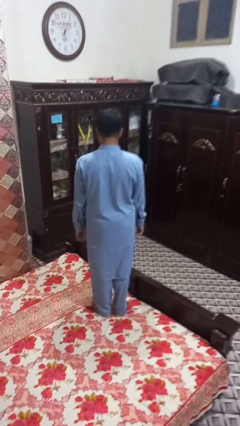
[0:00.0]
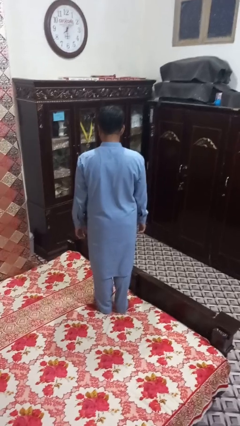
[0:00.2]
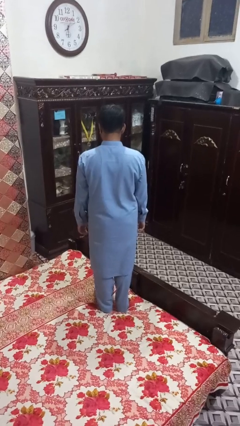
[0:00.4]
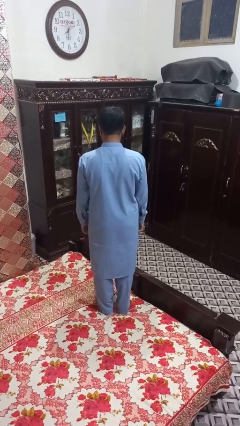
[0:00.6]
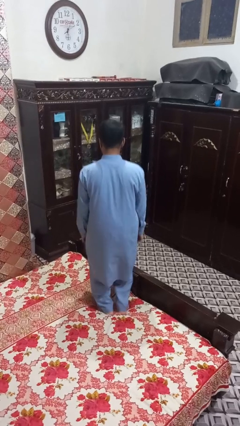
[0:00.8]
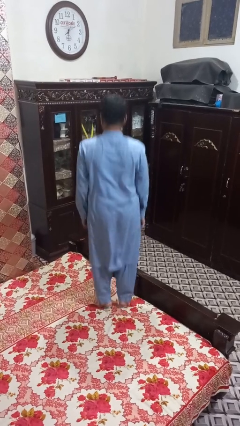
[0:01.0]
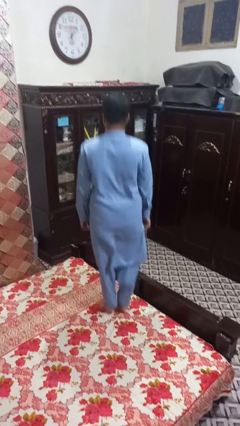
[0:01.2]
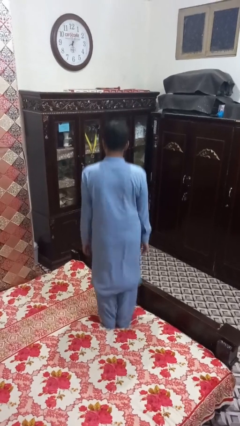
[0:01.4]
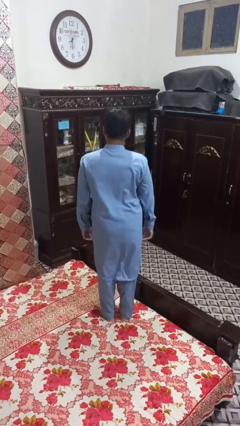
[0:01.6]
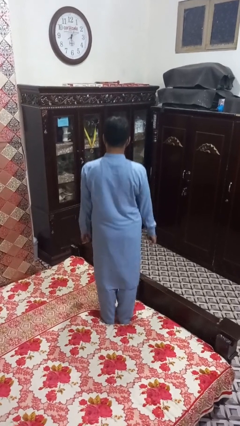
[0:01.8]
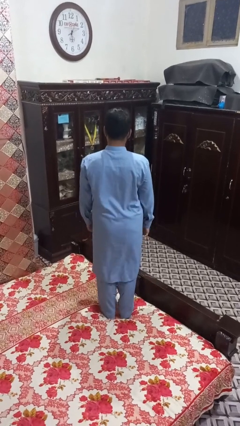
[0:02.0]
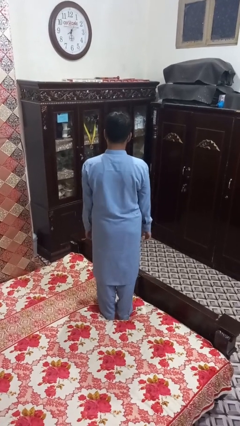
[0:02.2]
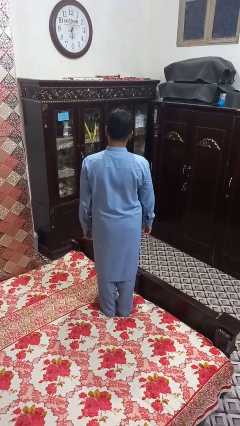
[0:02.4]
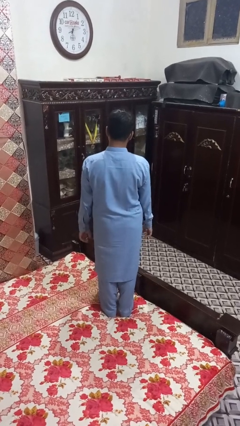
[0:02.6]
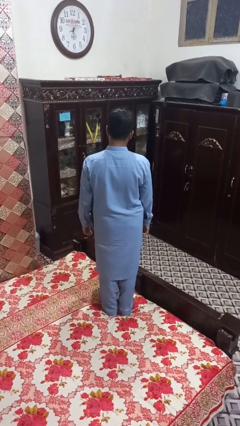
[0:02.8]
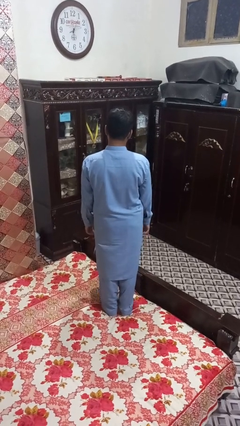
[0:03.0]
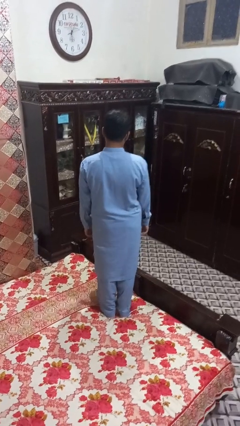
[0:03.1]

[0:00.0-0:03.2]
person jumps on bed

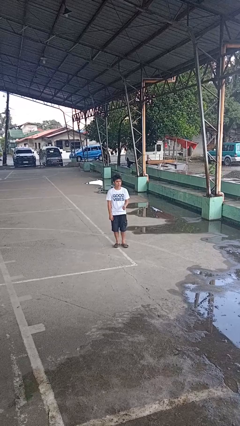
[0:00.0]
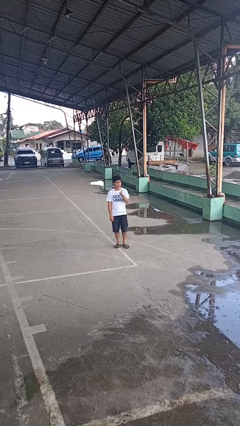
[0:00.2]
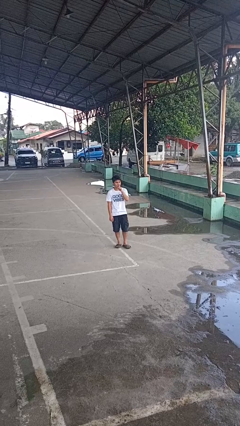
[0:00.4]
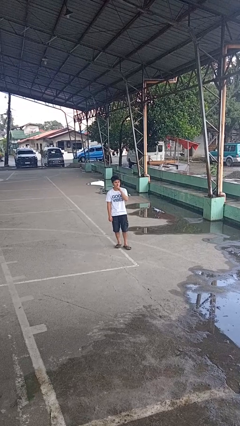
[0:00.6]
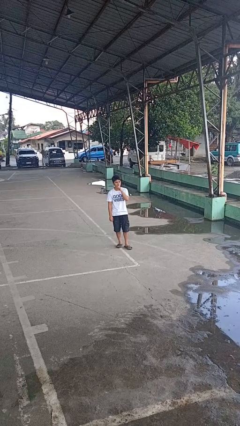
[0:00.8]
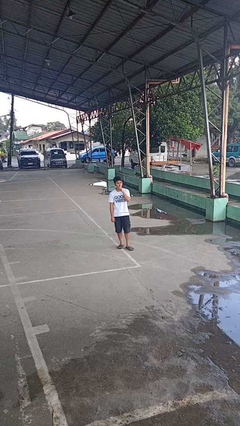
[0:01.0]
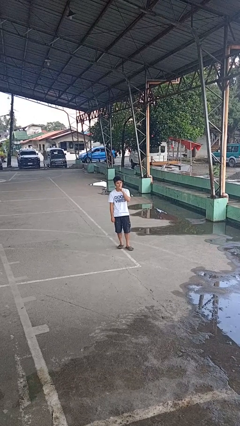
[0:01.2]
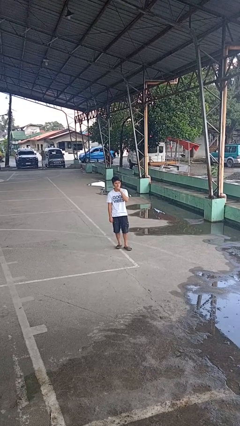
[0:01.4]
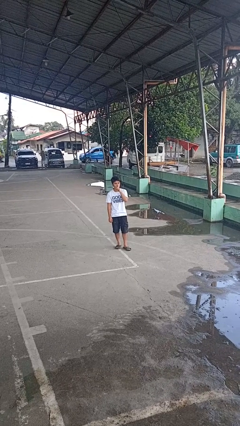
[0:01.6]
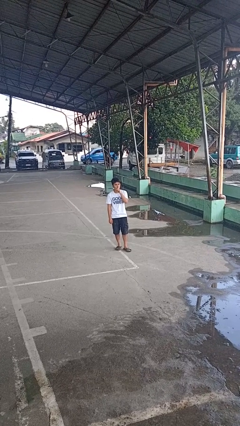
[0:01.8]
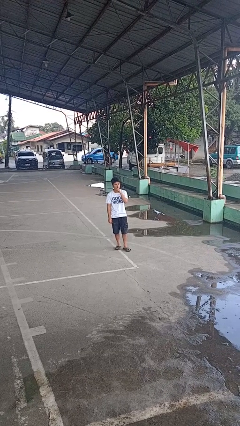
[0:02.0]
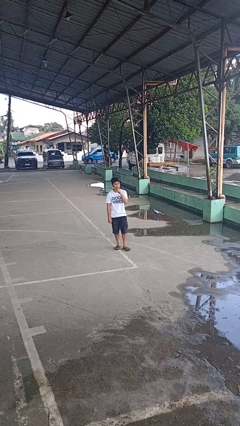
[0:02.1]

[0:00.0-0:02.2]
person gestures be quiet

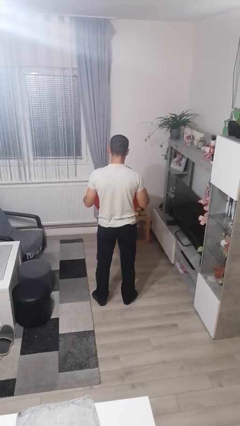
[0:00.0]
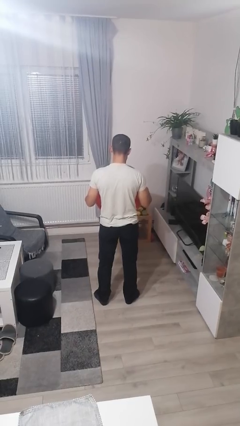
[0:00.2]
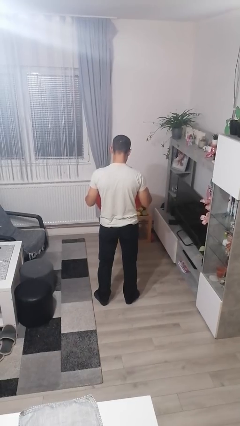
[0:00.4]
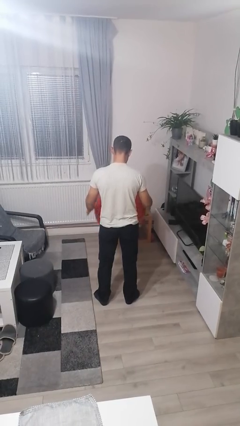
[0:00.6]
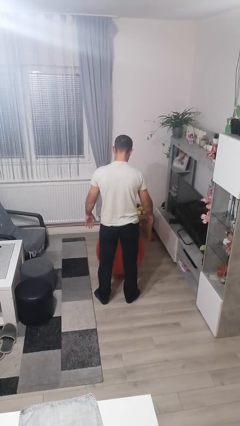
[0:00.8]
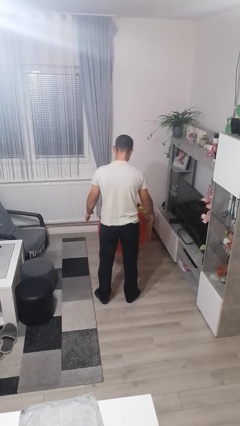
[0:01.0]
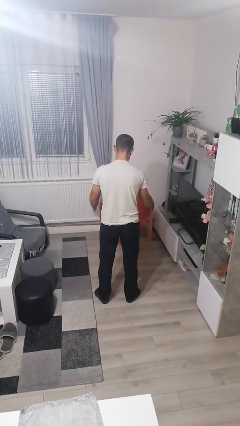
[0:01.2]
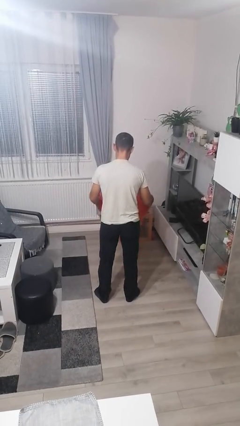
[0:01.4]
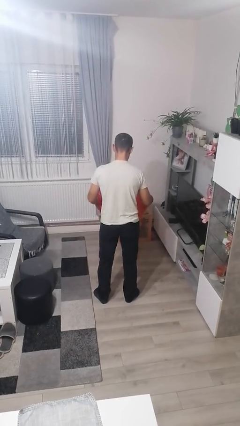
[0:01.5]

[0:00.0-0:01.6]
person bounces ball on floor

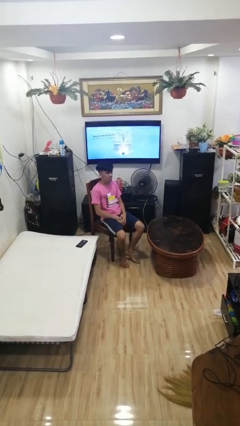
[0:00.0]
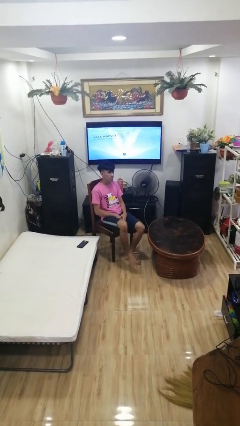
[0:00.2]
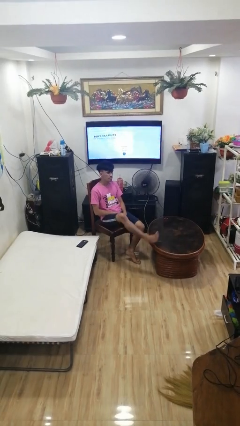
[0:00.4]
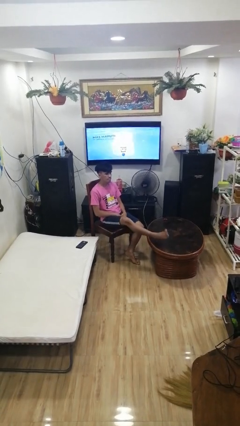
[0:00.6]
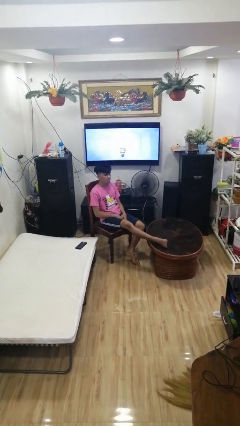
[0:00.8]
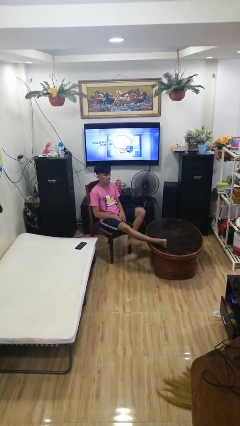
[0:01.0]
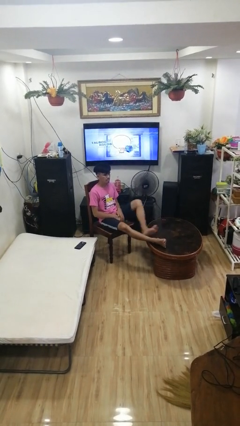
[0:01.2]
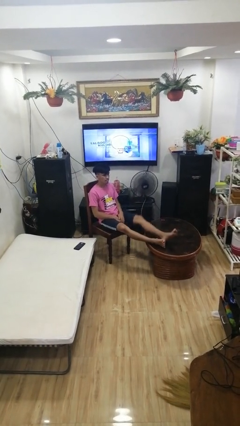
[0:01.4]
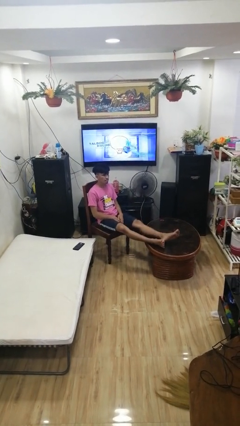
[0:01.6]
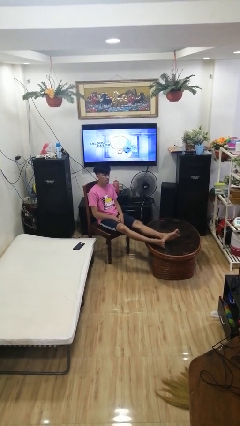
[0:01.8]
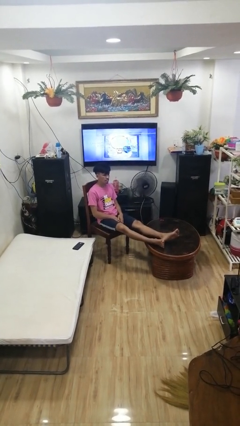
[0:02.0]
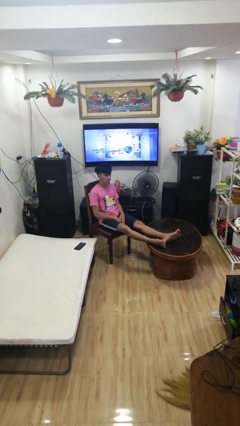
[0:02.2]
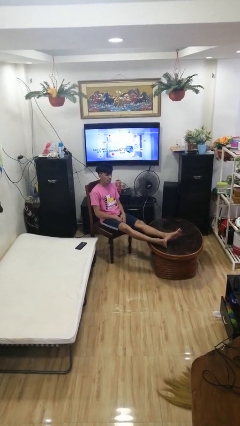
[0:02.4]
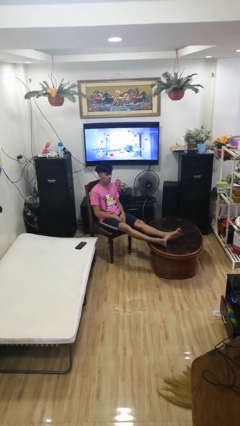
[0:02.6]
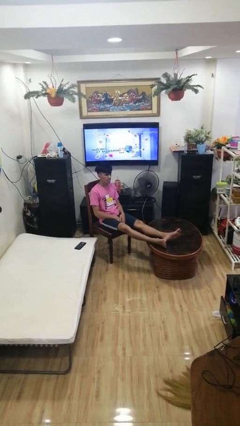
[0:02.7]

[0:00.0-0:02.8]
person puts feet up

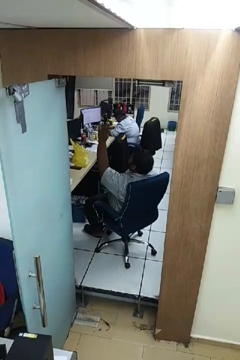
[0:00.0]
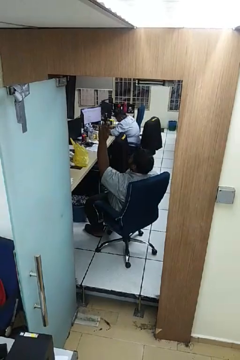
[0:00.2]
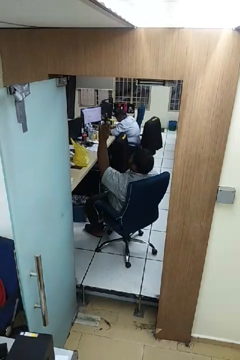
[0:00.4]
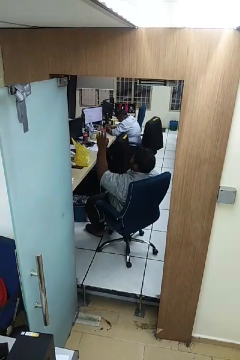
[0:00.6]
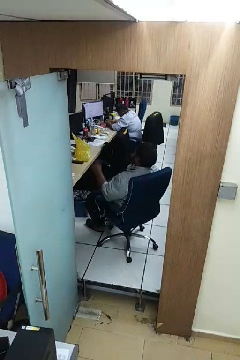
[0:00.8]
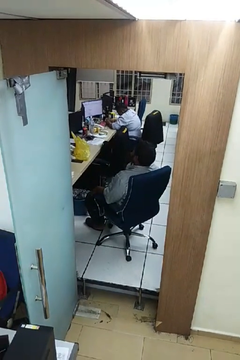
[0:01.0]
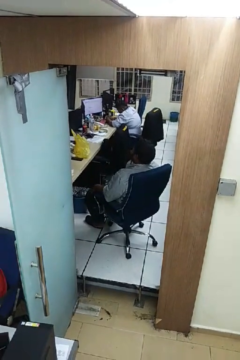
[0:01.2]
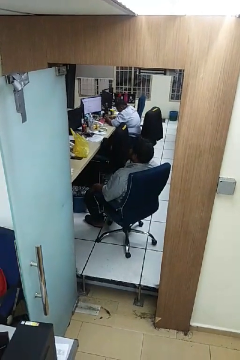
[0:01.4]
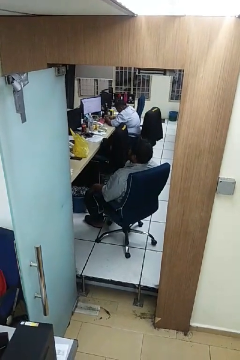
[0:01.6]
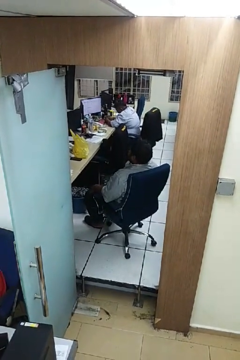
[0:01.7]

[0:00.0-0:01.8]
person gestures lower hand

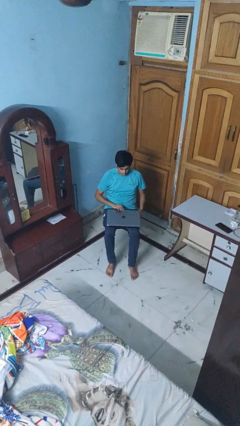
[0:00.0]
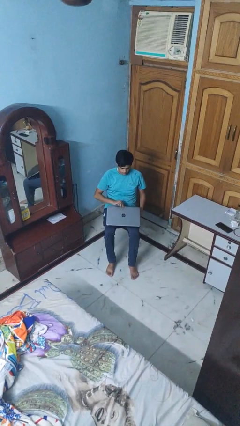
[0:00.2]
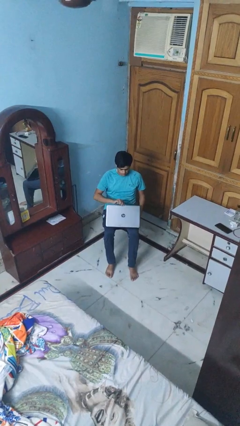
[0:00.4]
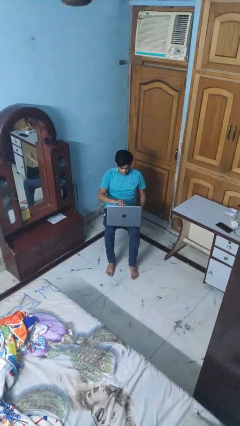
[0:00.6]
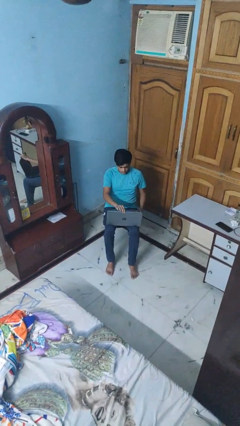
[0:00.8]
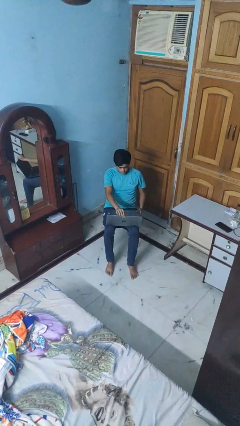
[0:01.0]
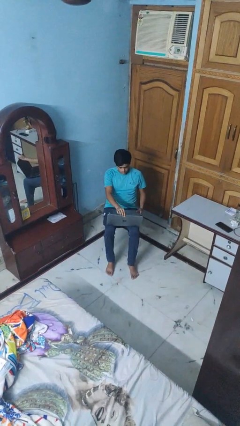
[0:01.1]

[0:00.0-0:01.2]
person opens laptop

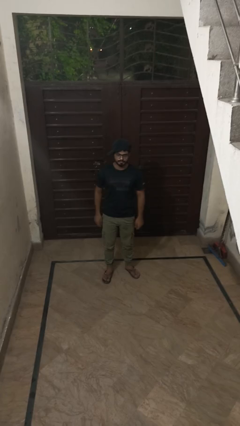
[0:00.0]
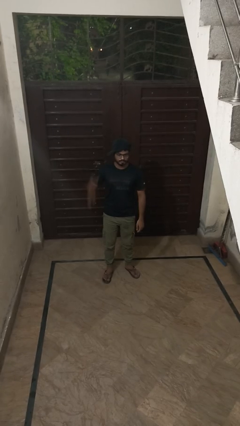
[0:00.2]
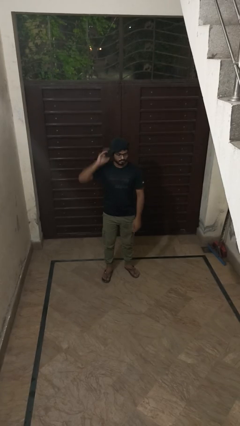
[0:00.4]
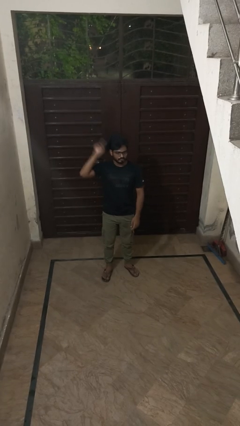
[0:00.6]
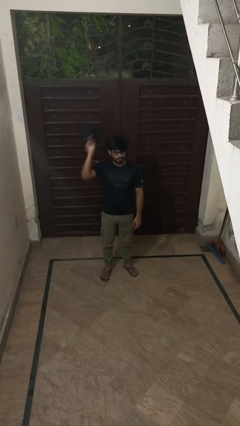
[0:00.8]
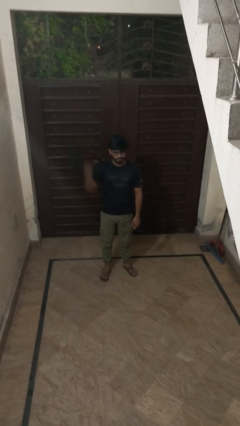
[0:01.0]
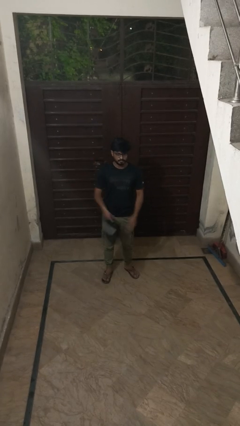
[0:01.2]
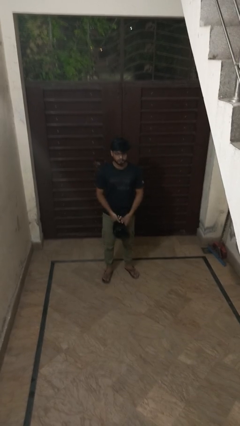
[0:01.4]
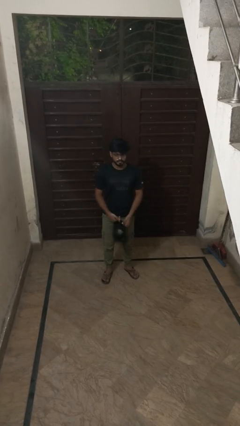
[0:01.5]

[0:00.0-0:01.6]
person takes off hat

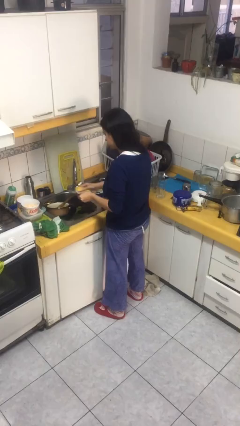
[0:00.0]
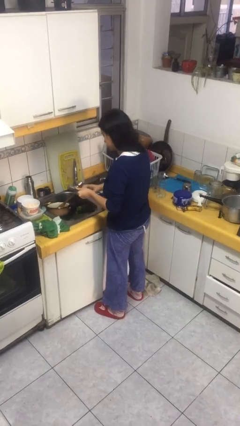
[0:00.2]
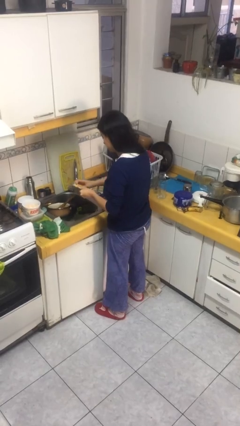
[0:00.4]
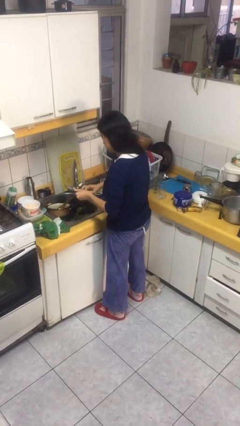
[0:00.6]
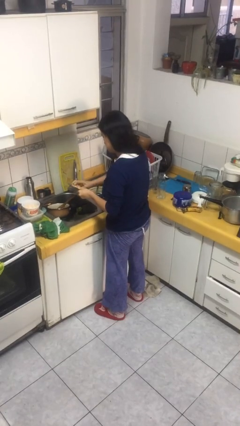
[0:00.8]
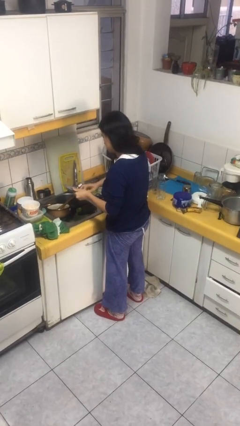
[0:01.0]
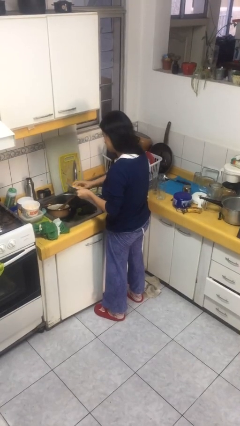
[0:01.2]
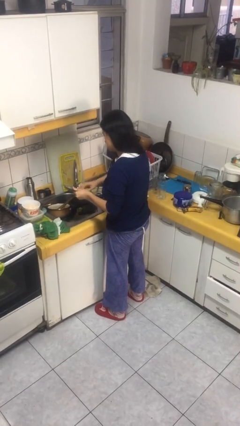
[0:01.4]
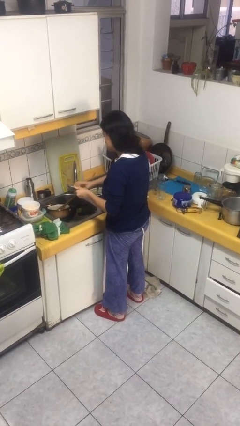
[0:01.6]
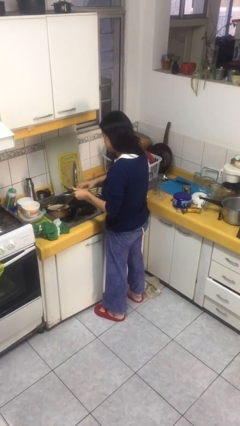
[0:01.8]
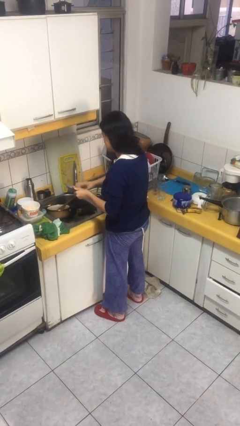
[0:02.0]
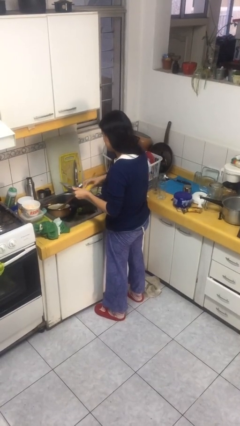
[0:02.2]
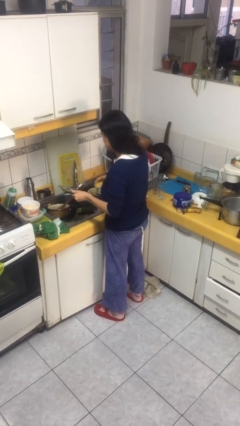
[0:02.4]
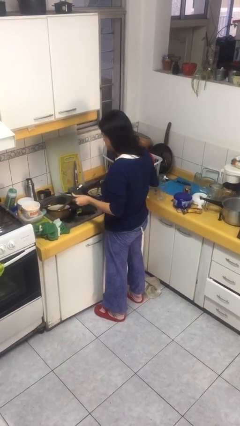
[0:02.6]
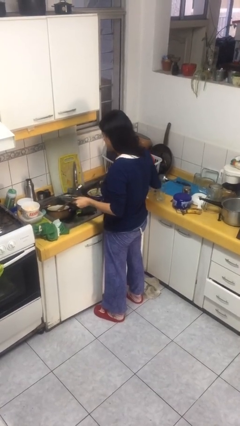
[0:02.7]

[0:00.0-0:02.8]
person washes dish
